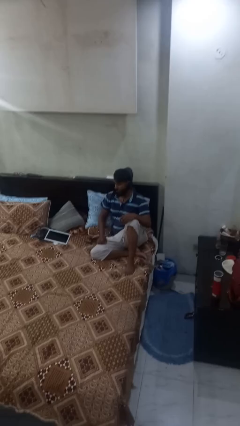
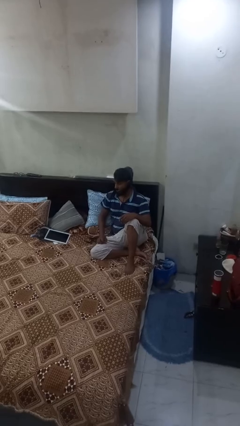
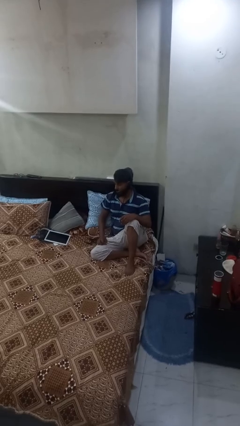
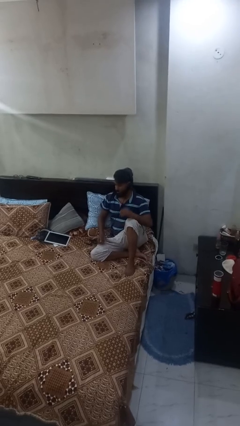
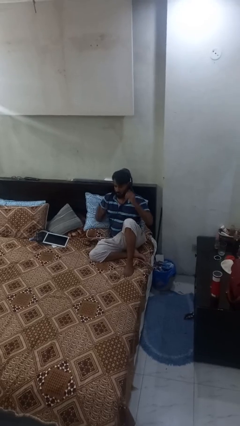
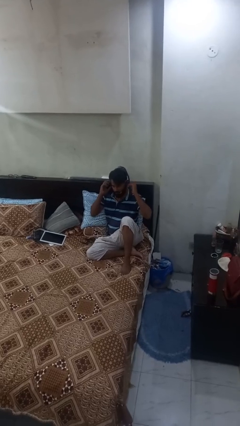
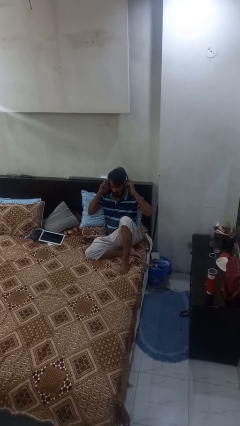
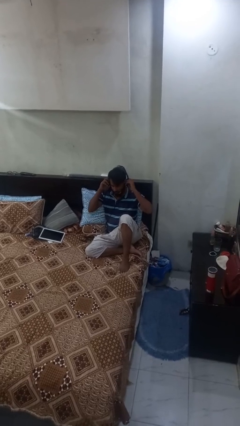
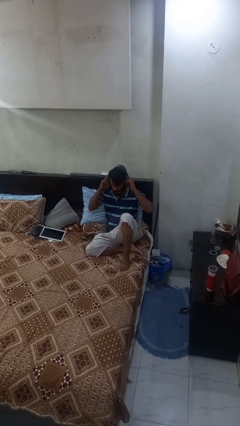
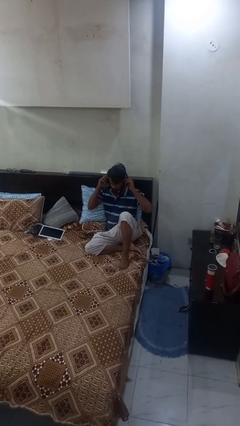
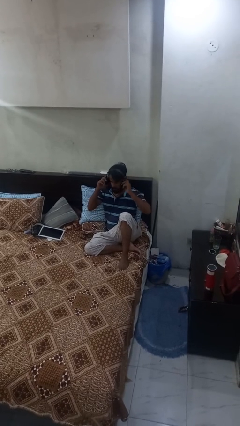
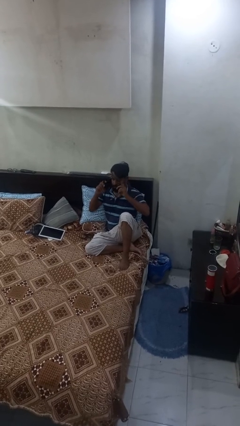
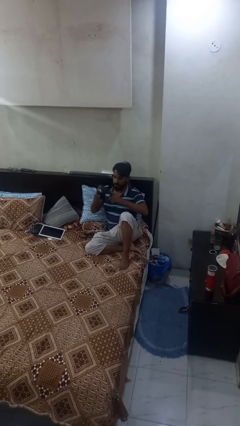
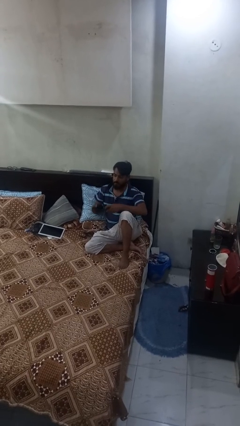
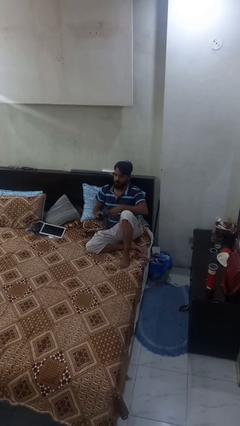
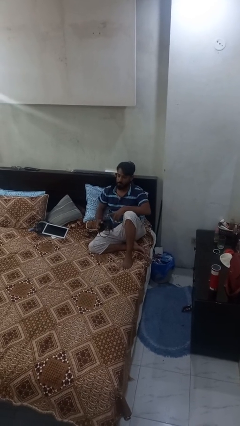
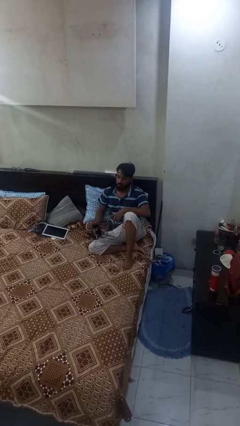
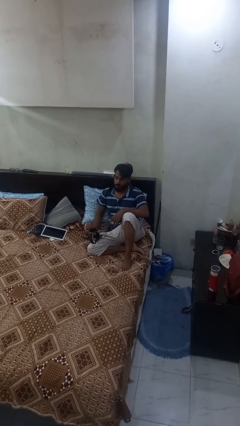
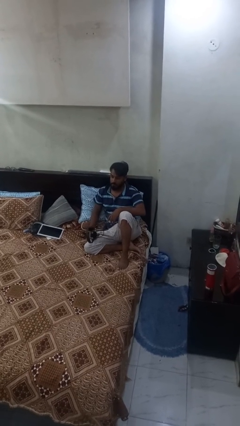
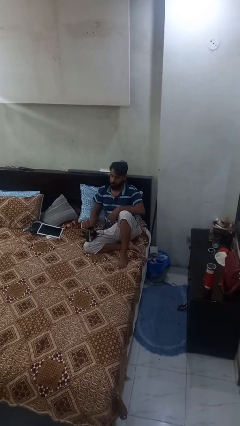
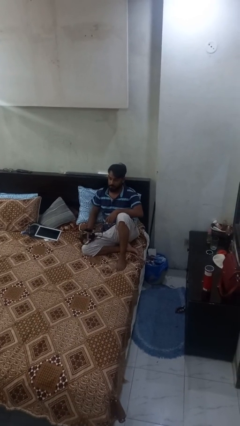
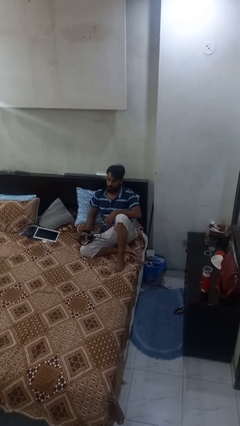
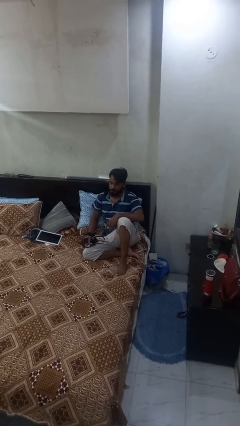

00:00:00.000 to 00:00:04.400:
person takes off headphones

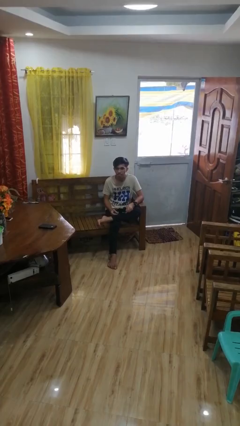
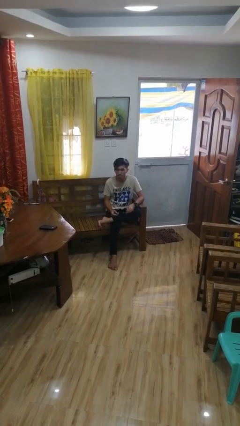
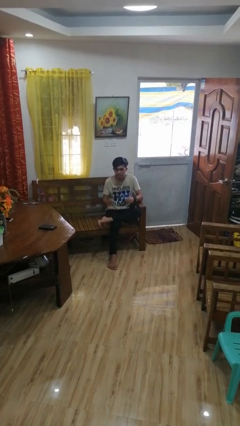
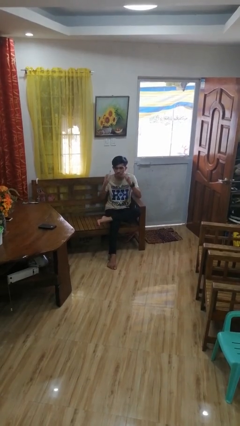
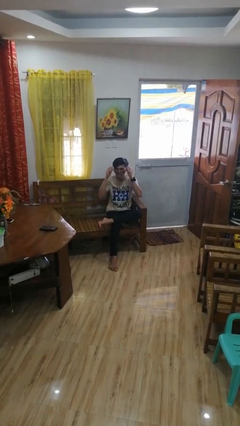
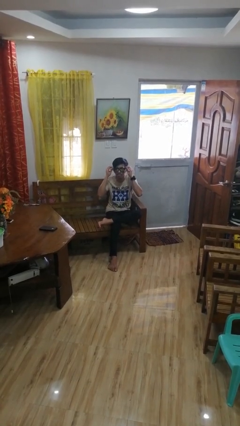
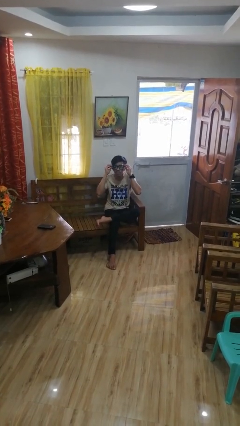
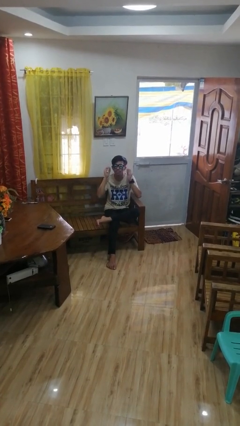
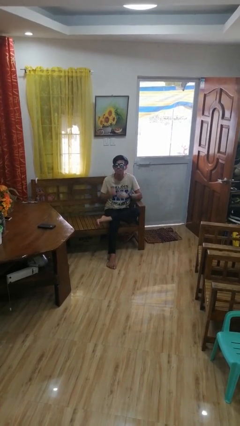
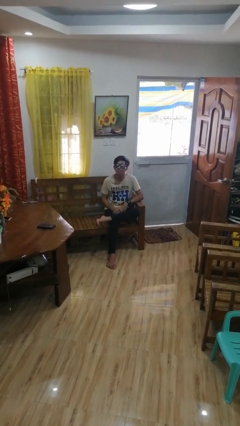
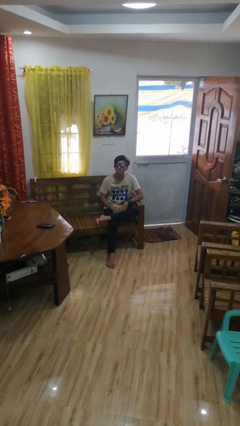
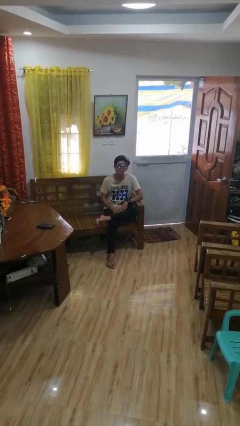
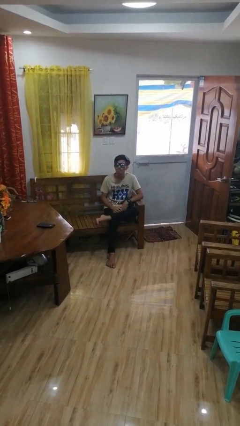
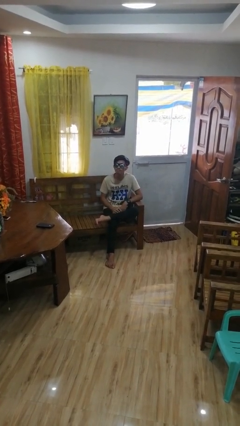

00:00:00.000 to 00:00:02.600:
person puts on sunglasses

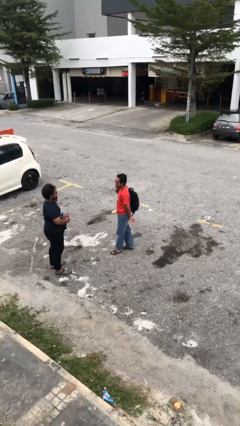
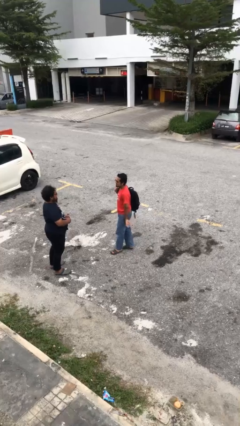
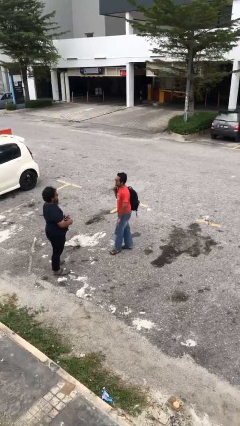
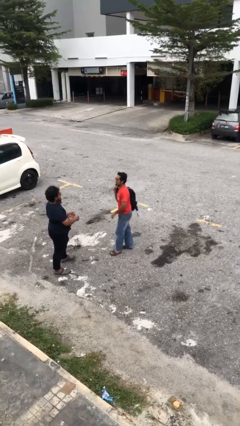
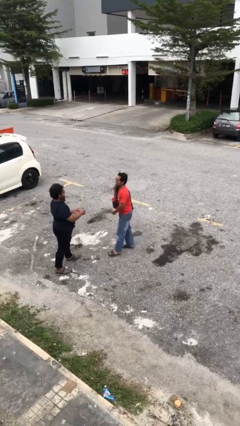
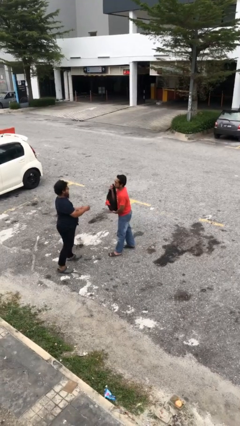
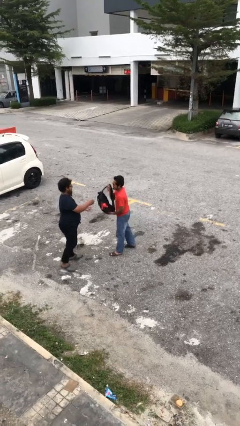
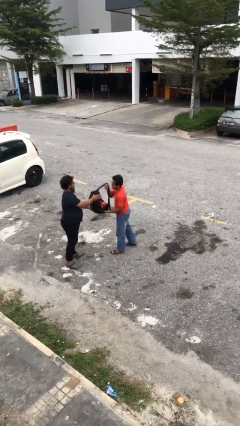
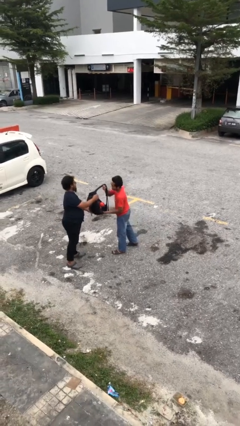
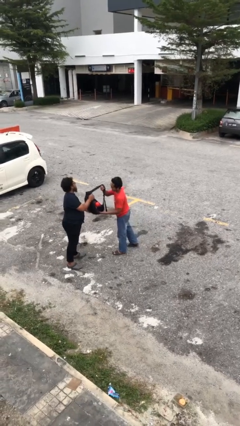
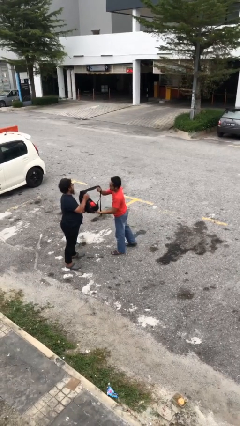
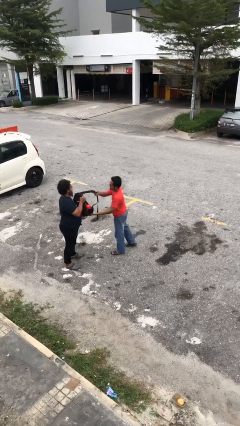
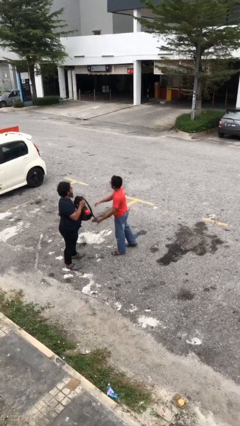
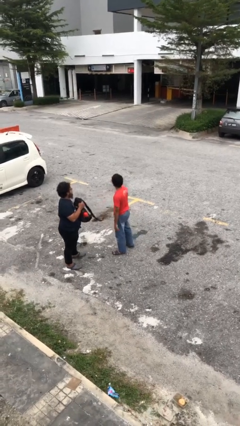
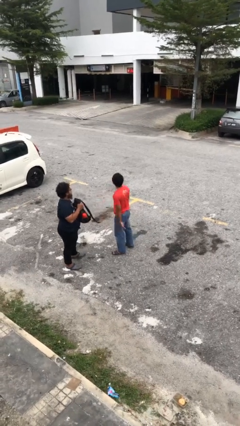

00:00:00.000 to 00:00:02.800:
person transfers object to person

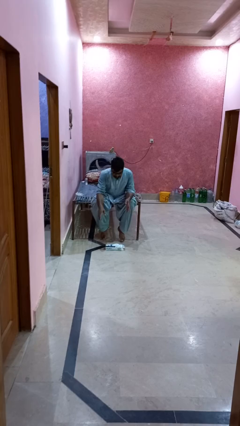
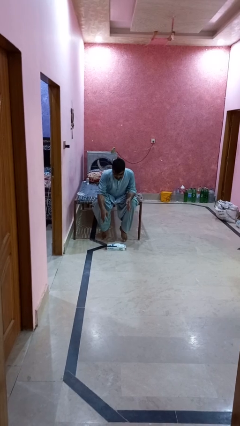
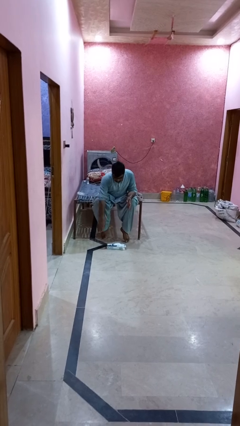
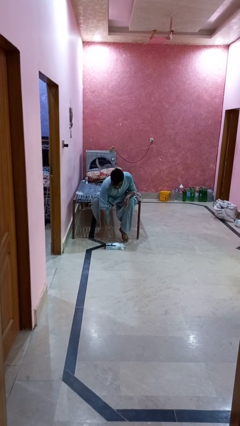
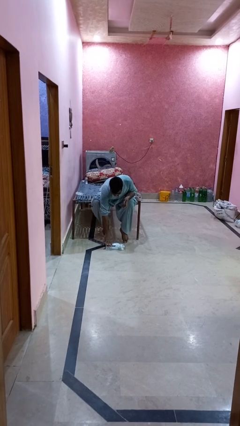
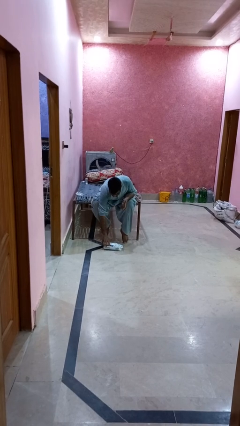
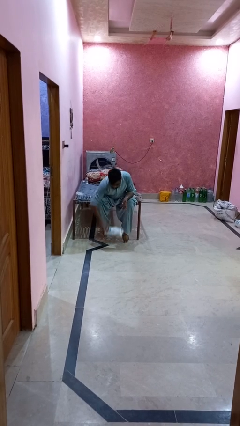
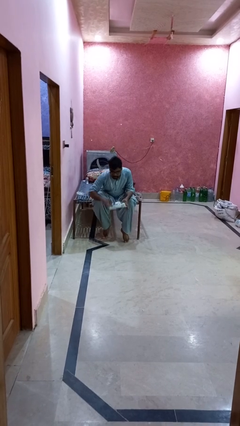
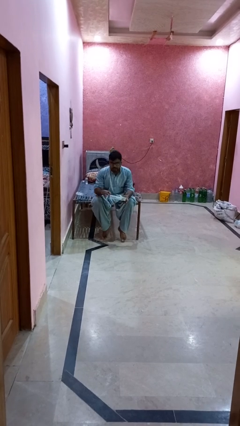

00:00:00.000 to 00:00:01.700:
person picks up object from floor

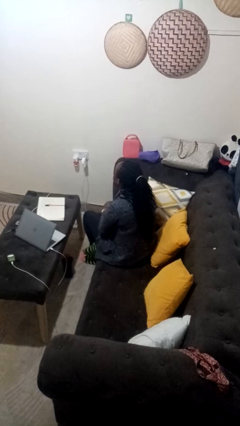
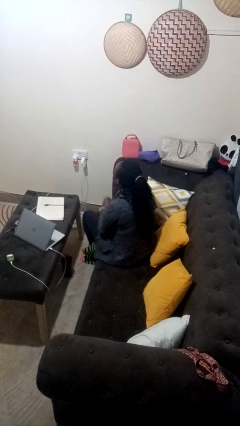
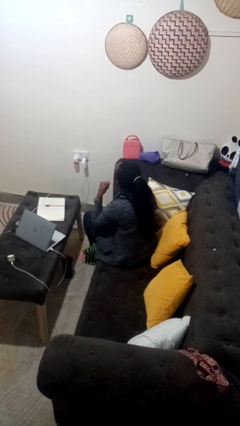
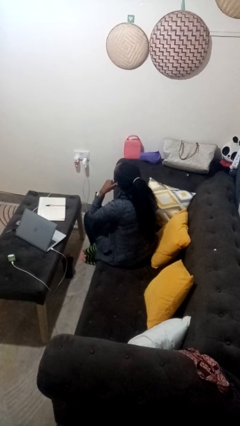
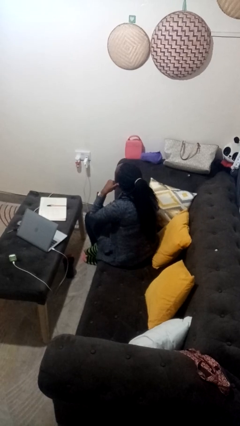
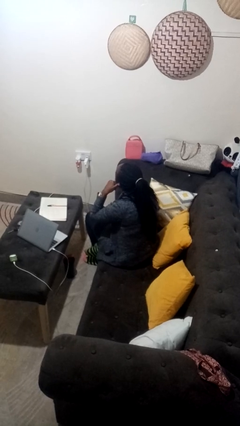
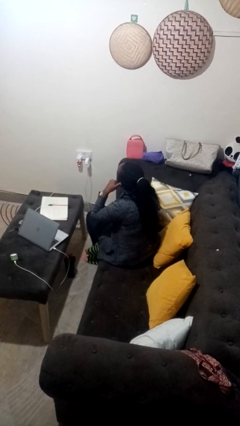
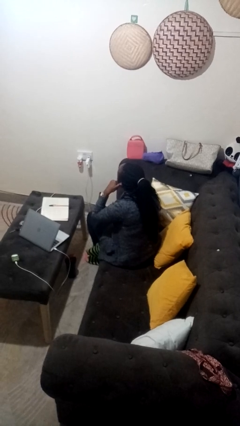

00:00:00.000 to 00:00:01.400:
person gestures call me

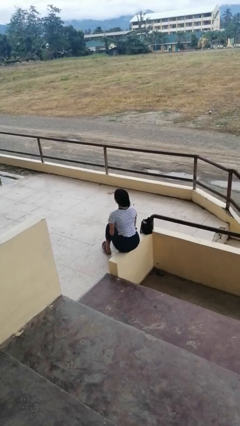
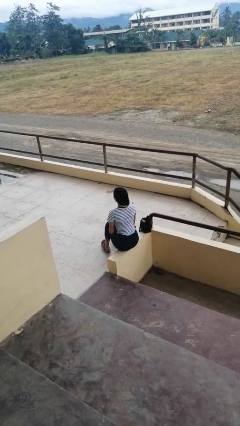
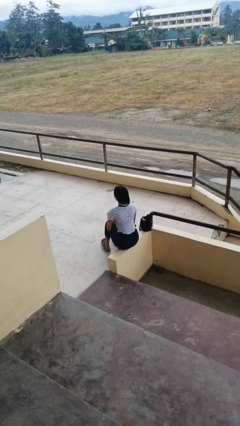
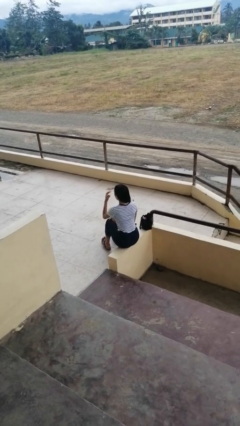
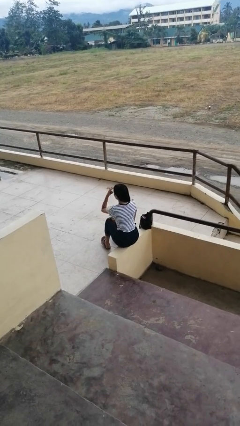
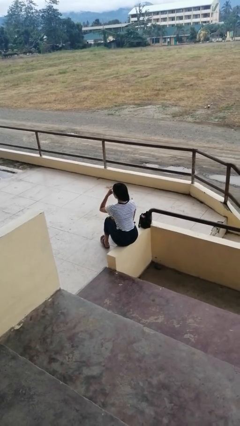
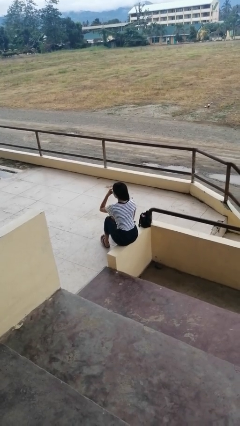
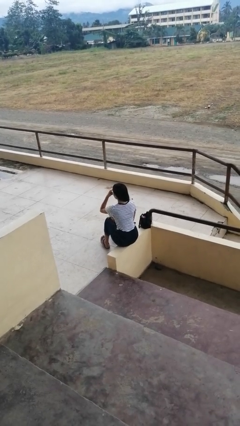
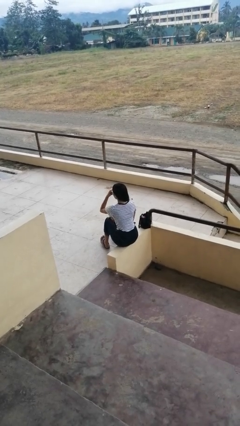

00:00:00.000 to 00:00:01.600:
person gestures watch closely

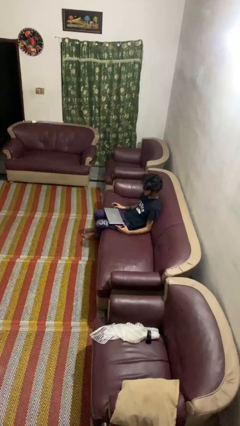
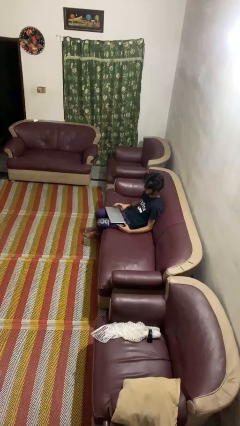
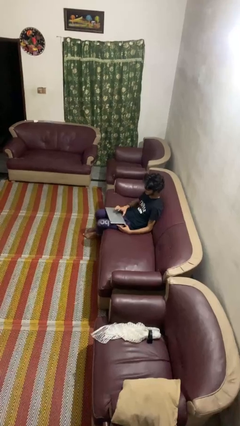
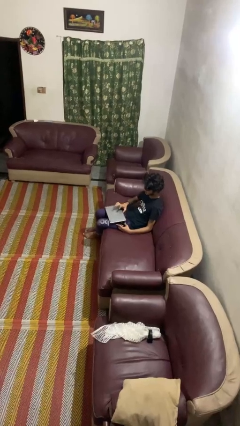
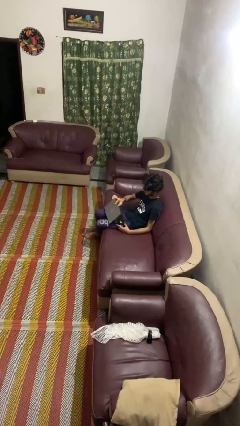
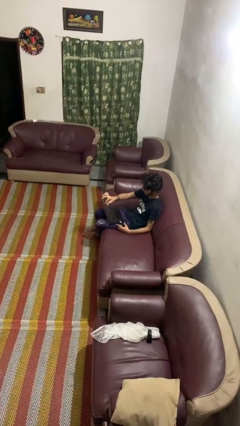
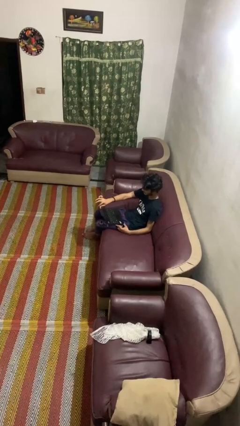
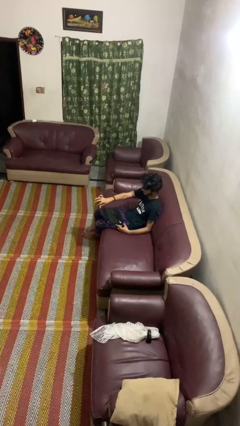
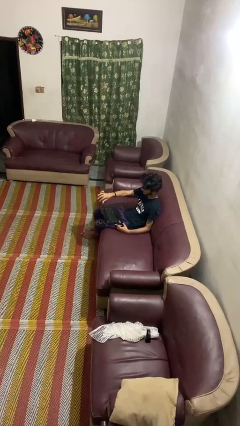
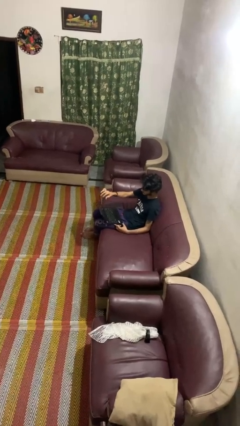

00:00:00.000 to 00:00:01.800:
person opens laptop

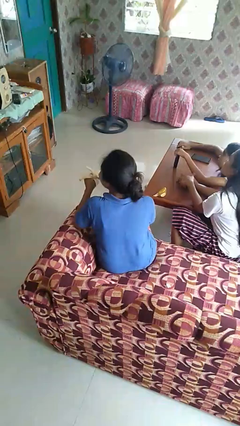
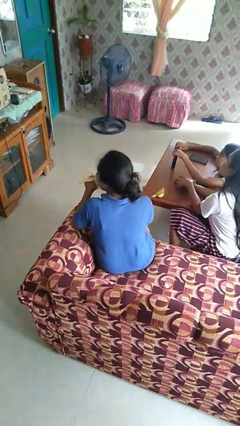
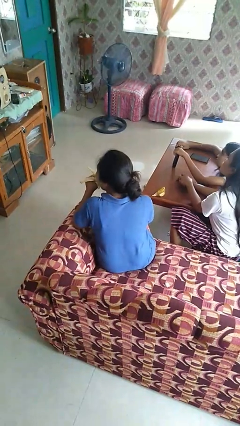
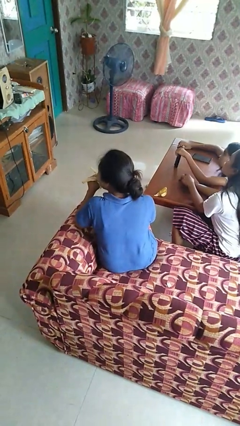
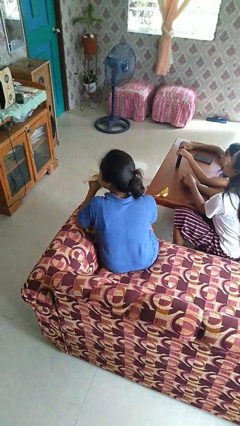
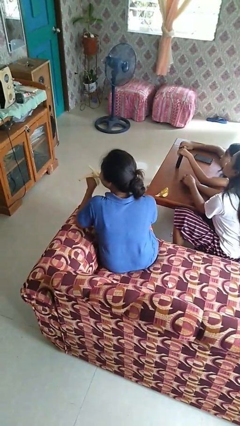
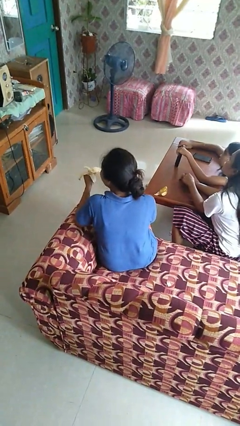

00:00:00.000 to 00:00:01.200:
person eats banana
